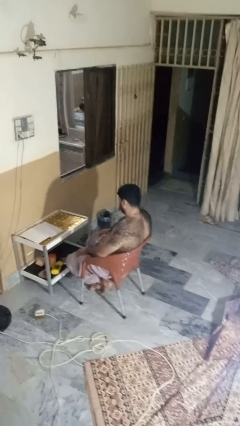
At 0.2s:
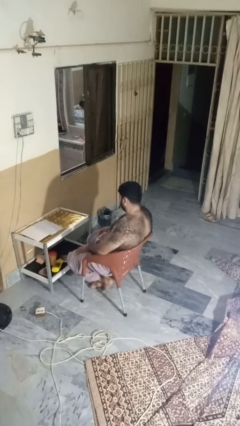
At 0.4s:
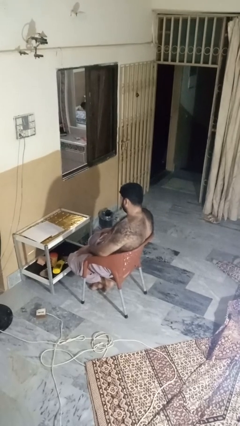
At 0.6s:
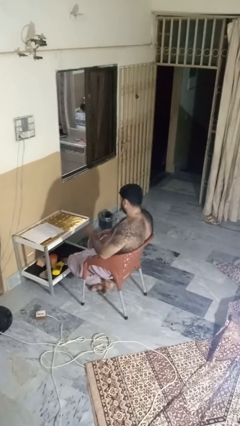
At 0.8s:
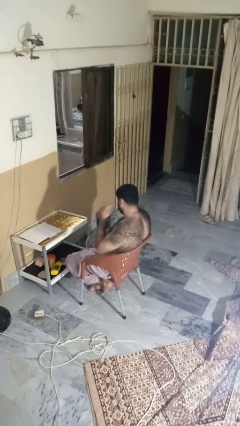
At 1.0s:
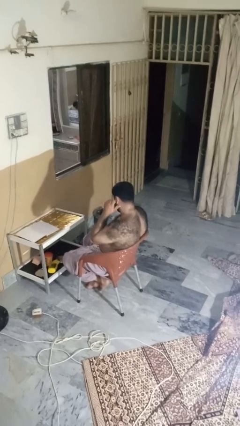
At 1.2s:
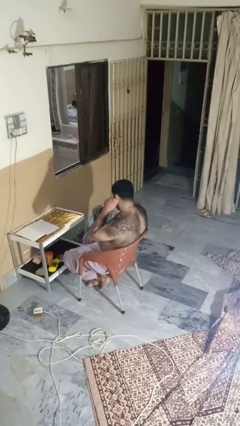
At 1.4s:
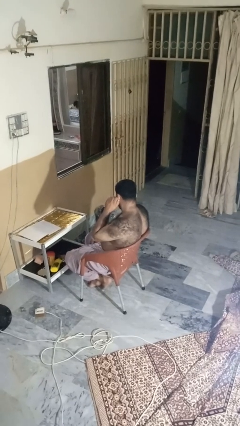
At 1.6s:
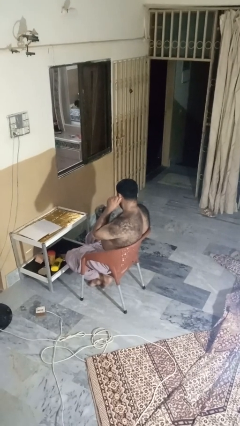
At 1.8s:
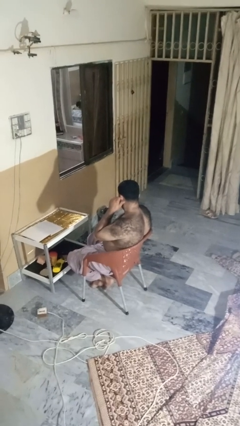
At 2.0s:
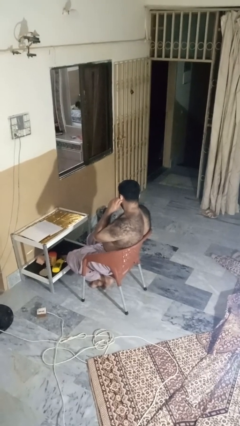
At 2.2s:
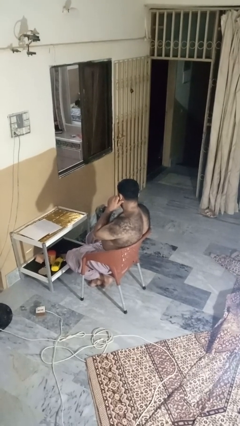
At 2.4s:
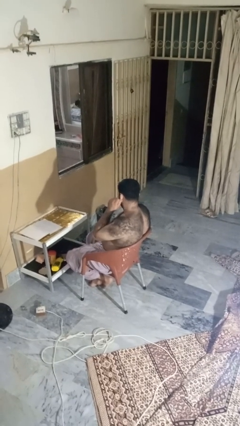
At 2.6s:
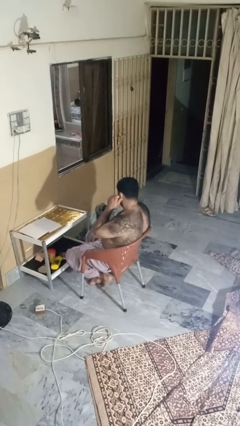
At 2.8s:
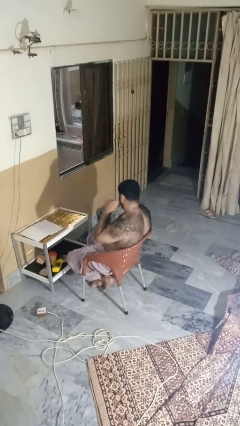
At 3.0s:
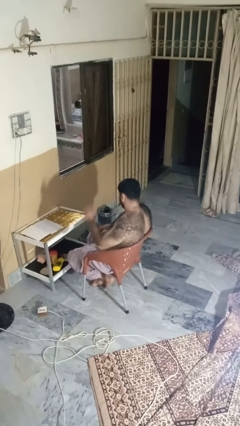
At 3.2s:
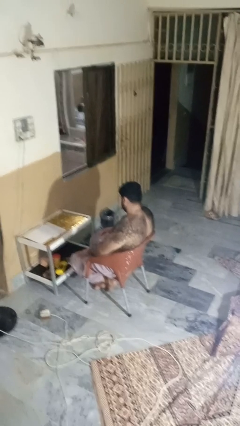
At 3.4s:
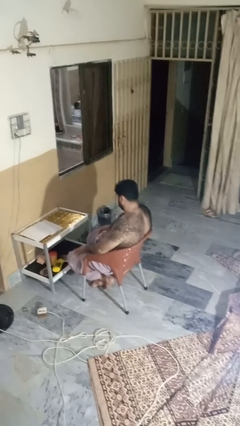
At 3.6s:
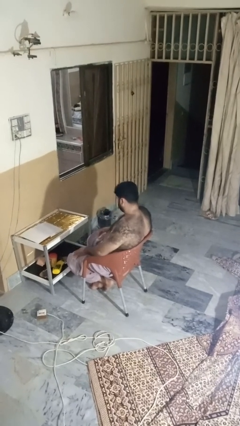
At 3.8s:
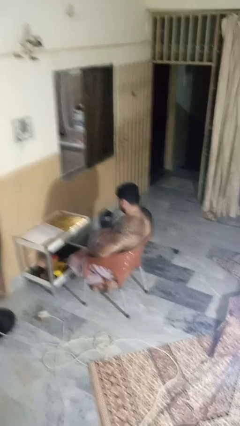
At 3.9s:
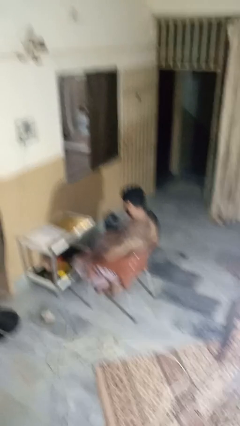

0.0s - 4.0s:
person touches earlobe

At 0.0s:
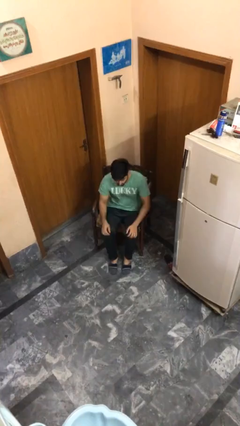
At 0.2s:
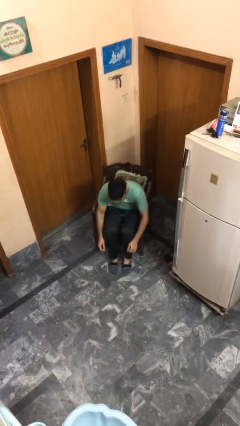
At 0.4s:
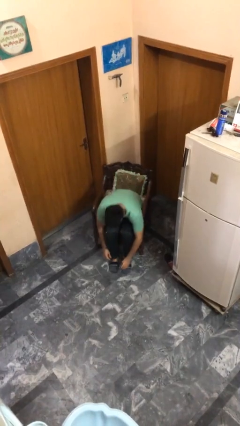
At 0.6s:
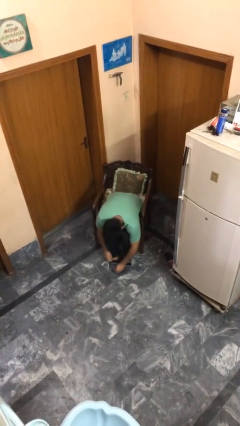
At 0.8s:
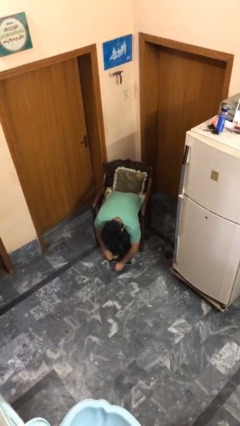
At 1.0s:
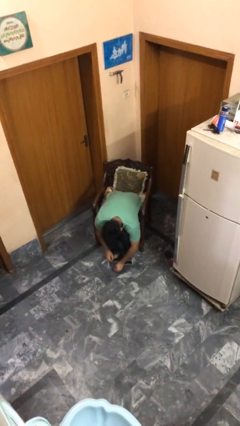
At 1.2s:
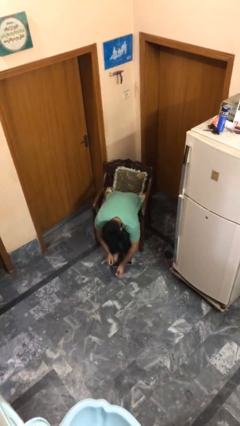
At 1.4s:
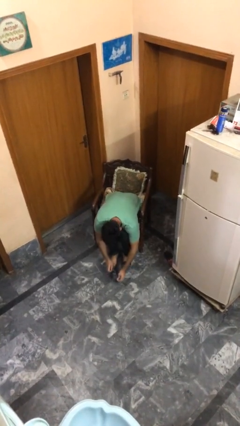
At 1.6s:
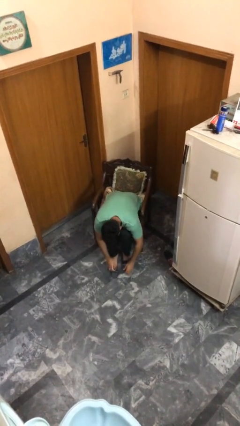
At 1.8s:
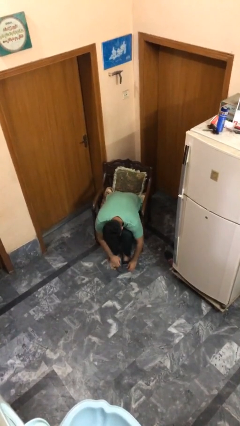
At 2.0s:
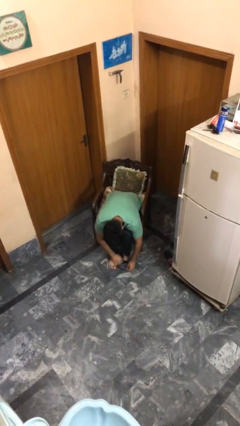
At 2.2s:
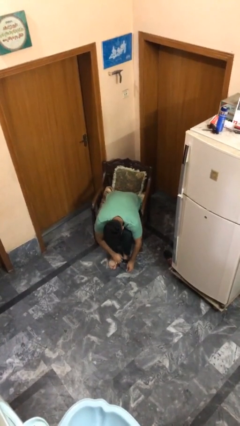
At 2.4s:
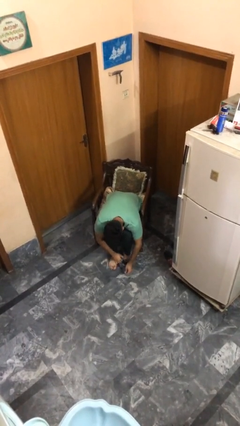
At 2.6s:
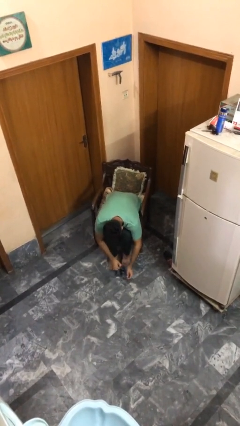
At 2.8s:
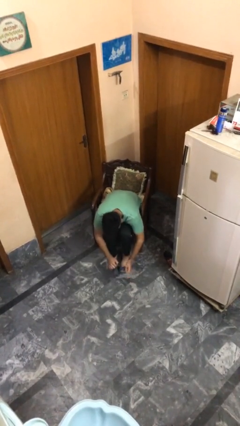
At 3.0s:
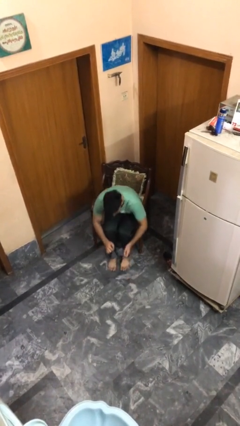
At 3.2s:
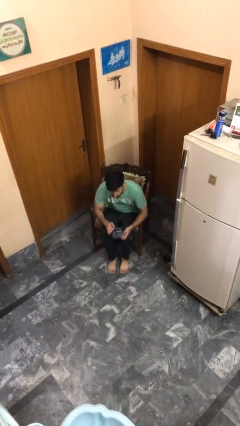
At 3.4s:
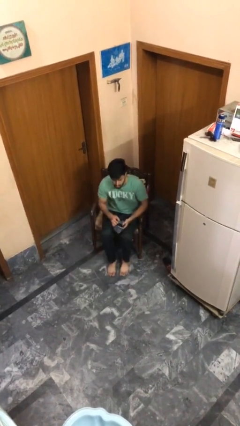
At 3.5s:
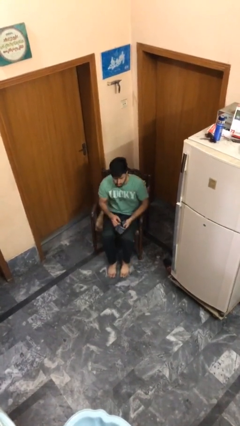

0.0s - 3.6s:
person takes off socks

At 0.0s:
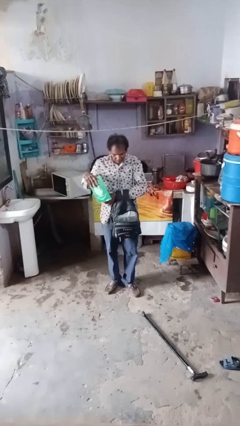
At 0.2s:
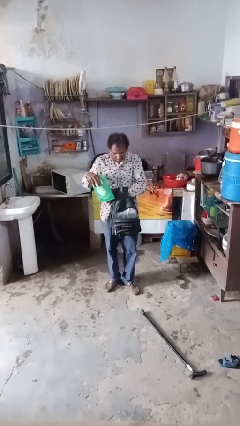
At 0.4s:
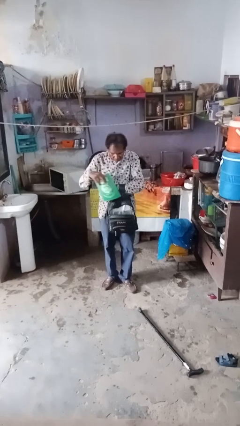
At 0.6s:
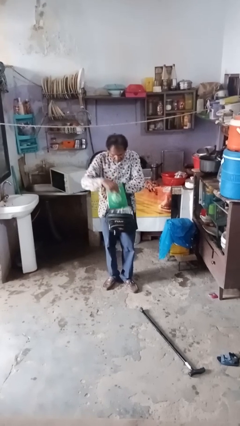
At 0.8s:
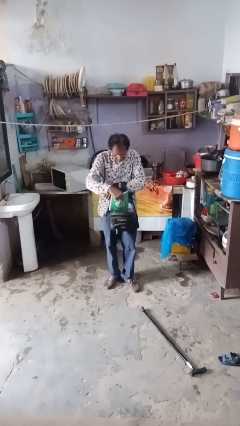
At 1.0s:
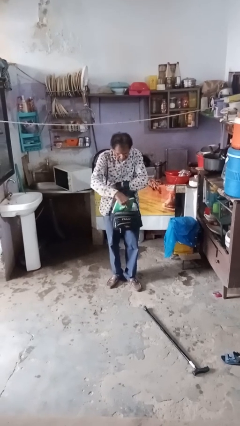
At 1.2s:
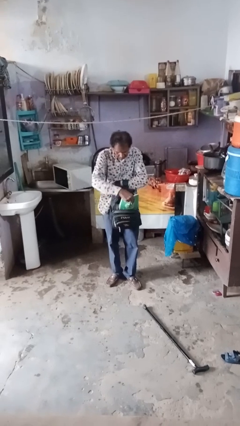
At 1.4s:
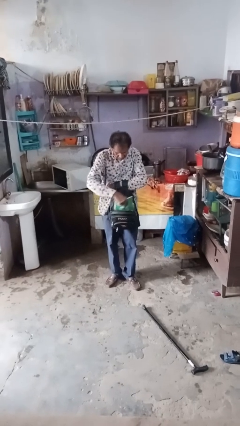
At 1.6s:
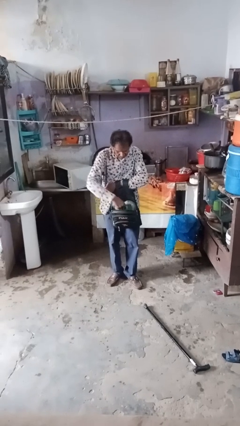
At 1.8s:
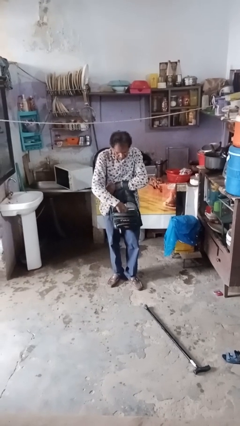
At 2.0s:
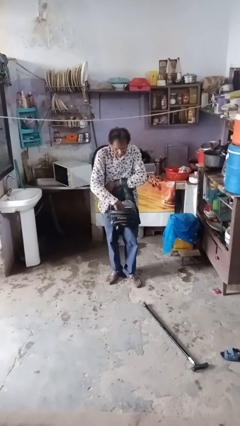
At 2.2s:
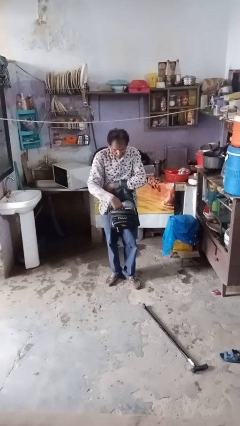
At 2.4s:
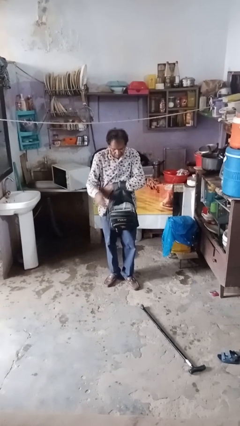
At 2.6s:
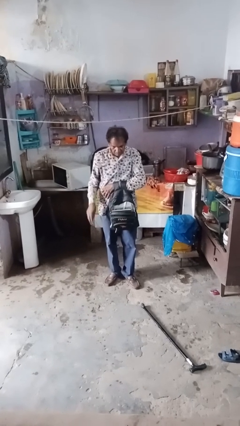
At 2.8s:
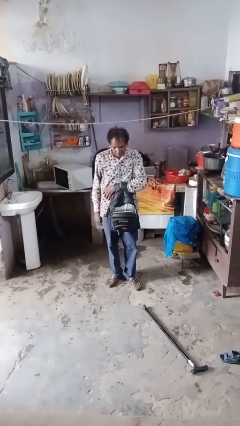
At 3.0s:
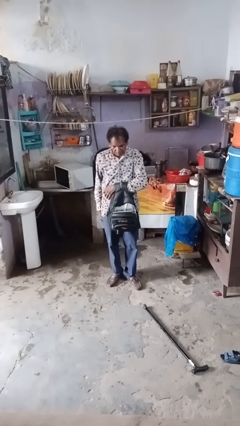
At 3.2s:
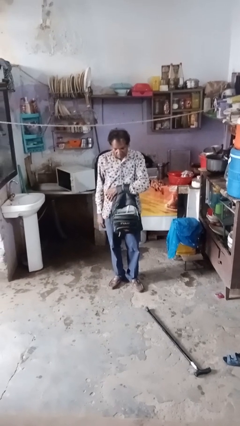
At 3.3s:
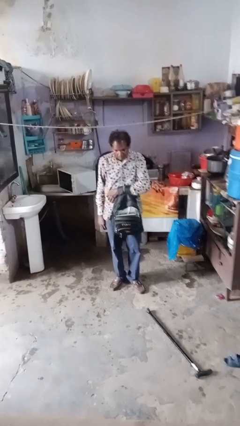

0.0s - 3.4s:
person puts object into bag

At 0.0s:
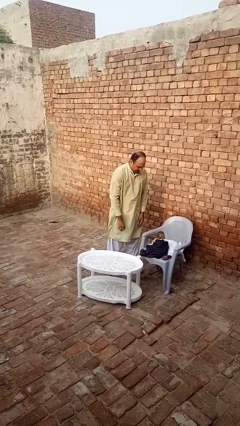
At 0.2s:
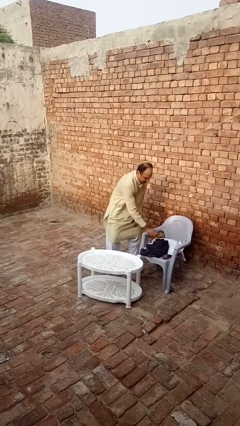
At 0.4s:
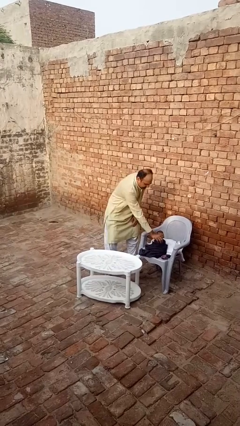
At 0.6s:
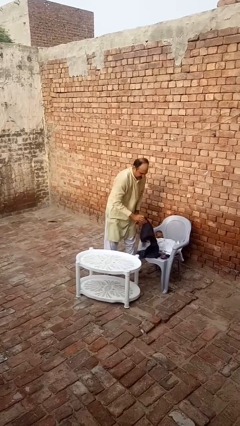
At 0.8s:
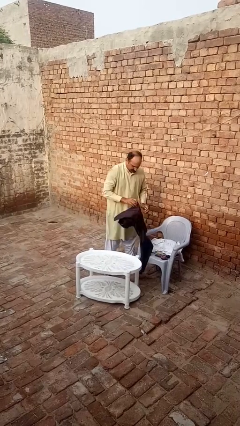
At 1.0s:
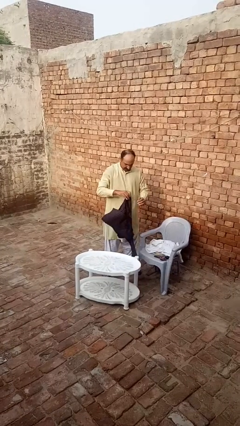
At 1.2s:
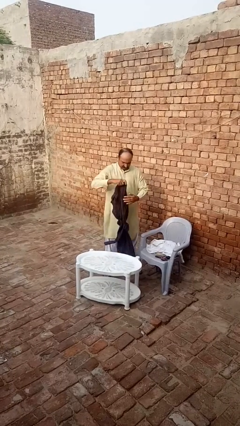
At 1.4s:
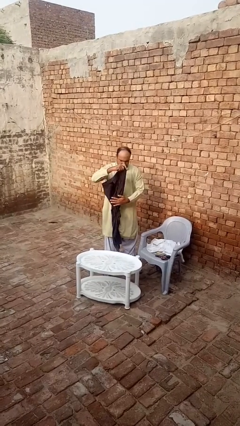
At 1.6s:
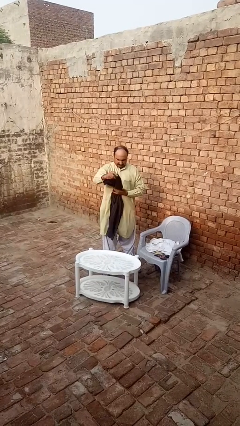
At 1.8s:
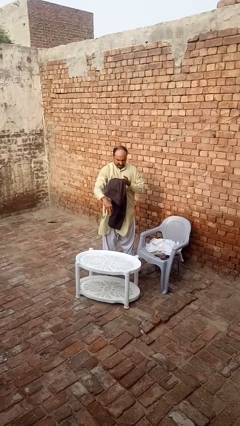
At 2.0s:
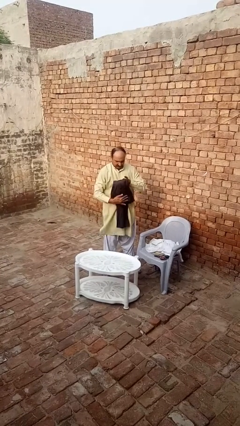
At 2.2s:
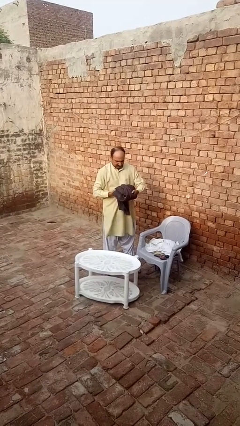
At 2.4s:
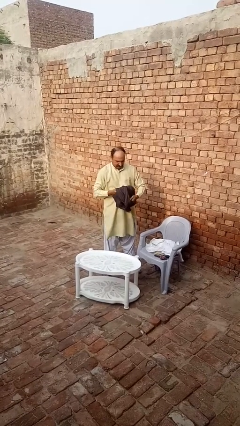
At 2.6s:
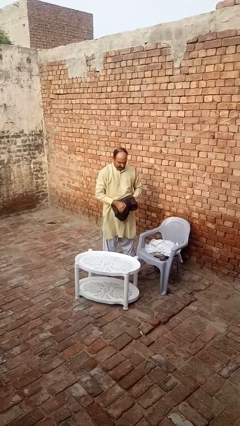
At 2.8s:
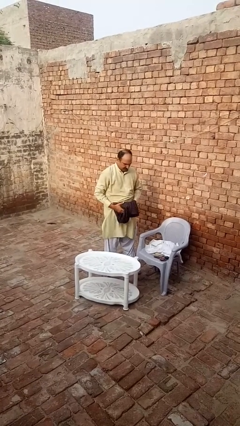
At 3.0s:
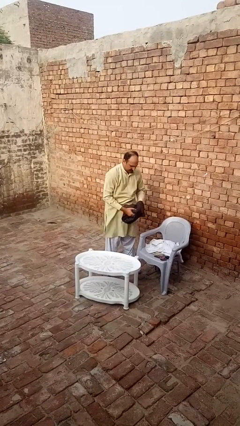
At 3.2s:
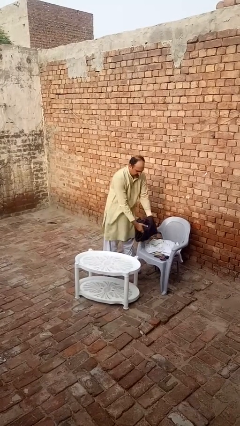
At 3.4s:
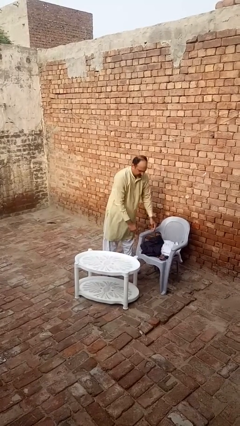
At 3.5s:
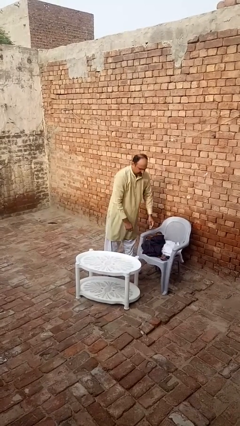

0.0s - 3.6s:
person folds pants

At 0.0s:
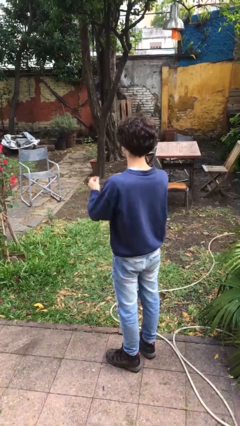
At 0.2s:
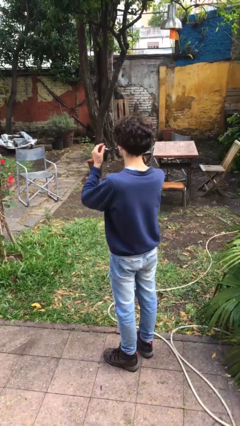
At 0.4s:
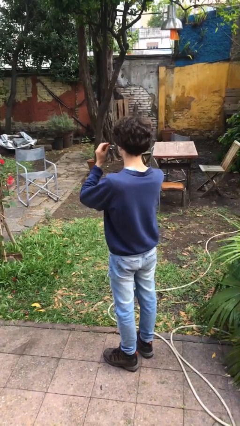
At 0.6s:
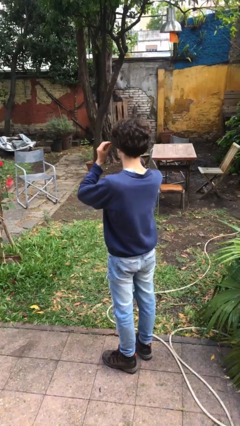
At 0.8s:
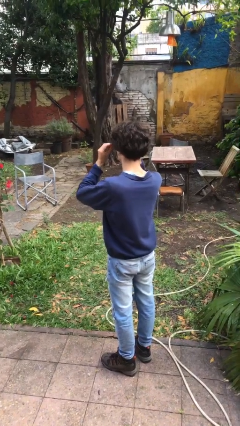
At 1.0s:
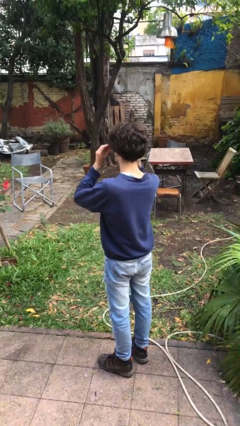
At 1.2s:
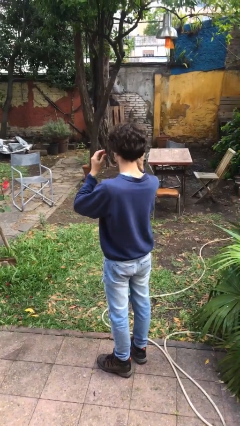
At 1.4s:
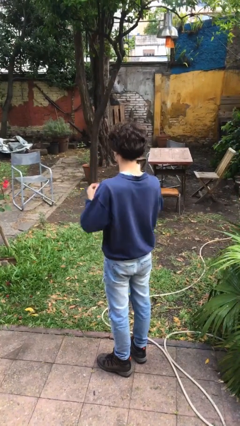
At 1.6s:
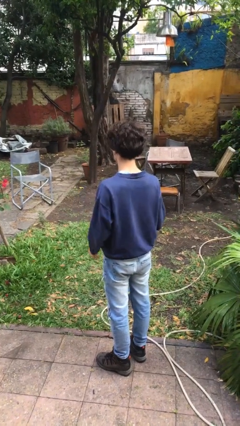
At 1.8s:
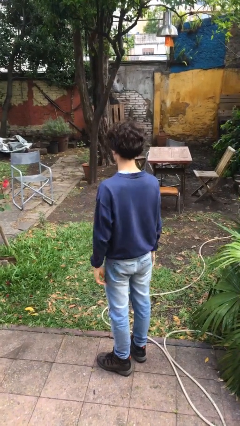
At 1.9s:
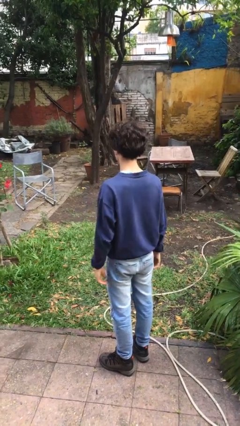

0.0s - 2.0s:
person puts on glasses

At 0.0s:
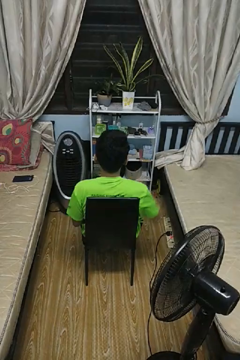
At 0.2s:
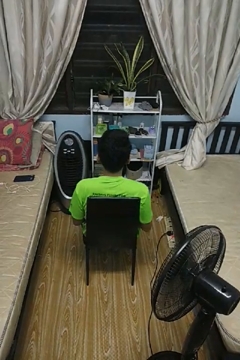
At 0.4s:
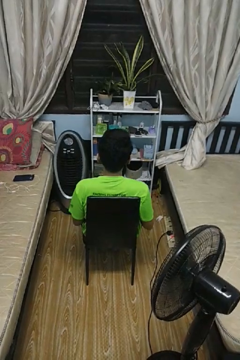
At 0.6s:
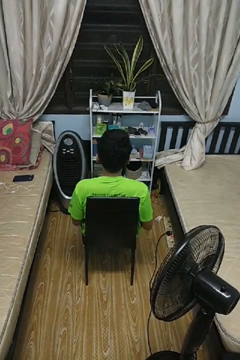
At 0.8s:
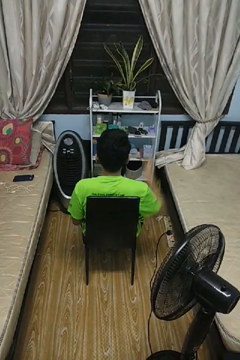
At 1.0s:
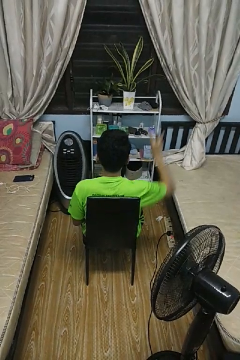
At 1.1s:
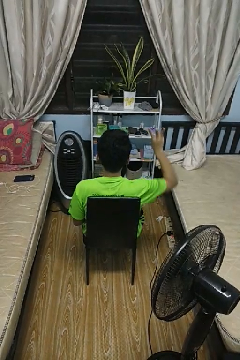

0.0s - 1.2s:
person gestures number three
